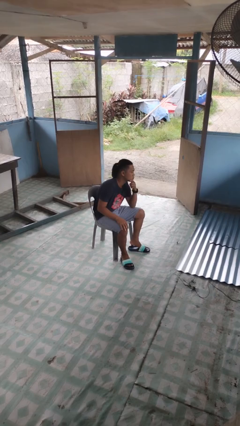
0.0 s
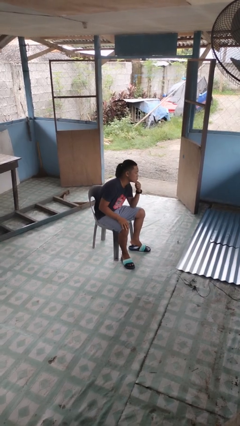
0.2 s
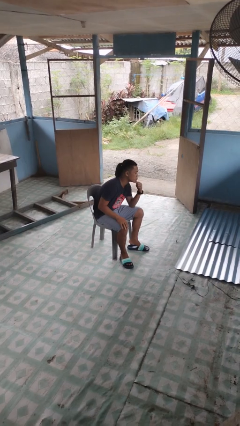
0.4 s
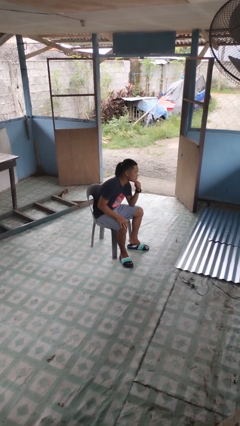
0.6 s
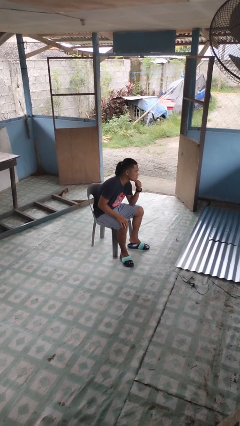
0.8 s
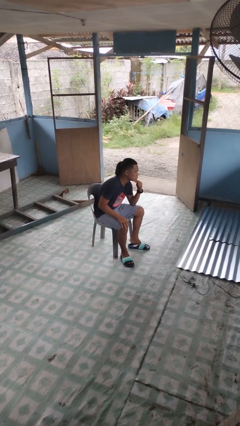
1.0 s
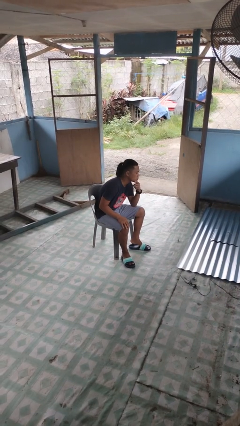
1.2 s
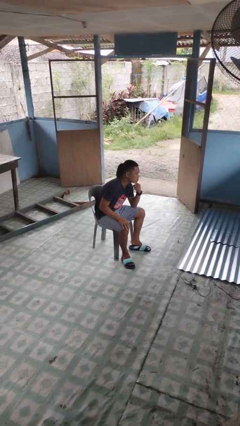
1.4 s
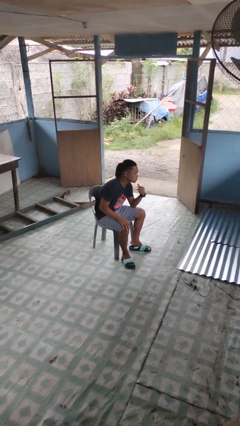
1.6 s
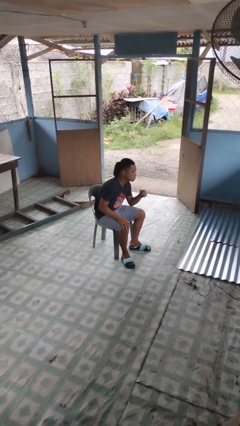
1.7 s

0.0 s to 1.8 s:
person strokes chin

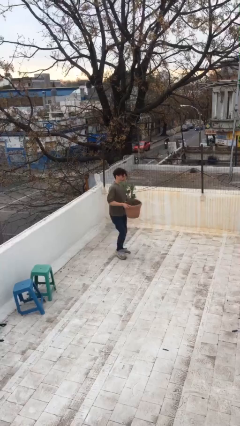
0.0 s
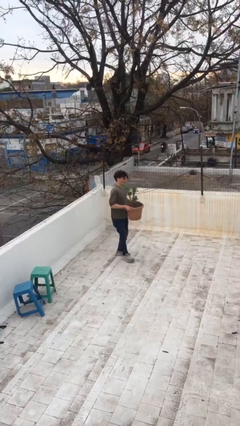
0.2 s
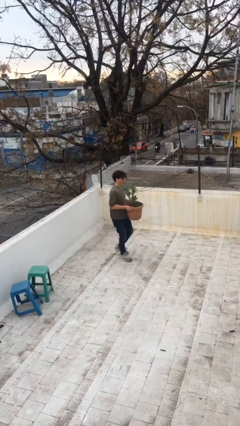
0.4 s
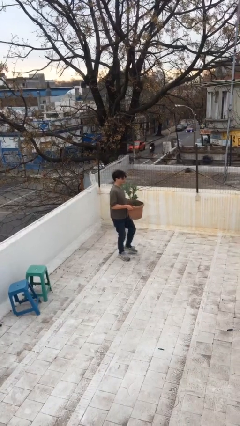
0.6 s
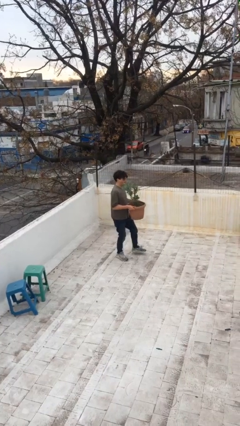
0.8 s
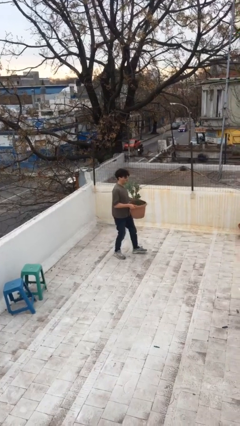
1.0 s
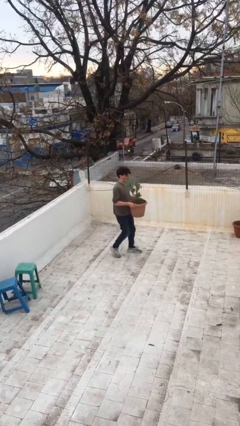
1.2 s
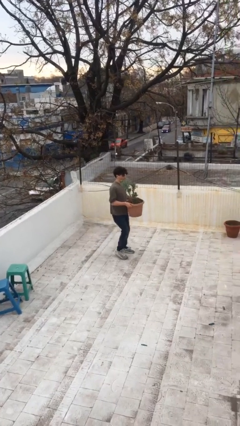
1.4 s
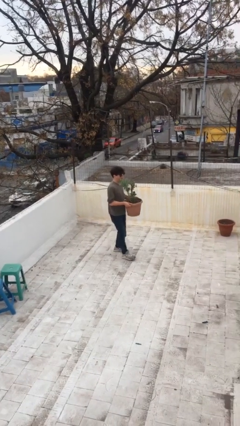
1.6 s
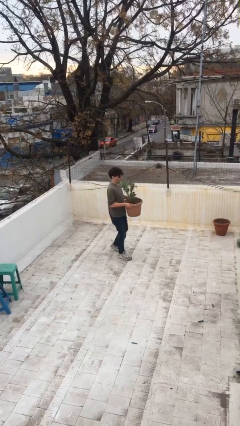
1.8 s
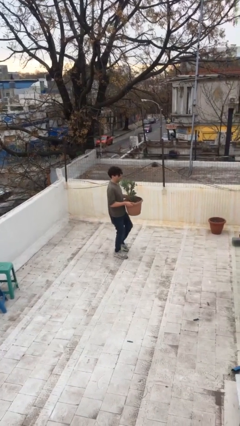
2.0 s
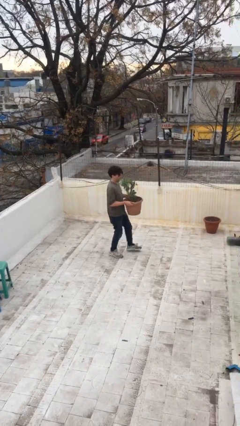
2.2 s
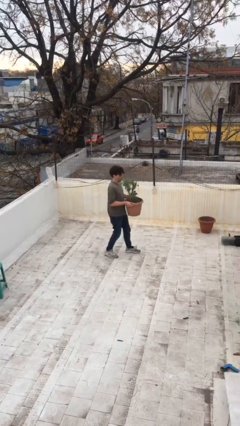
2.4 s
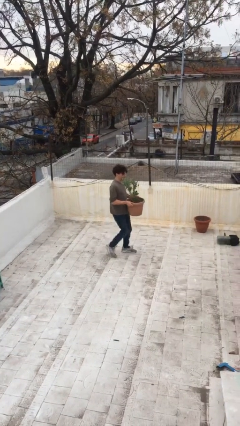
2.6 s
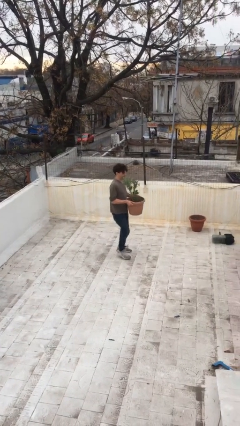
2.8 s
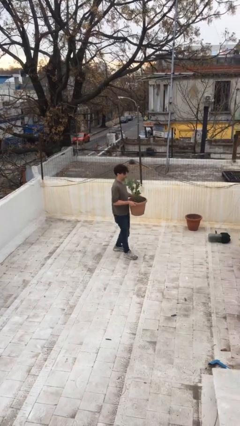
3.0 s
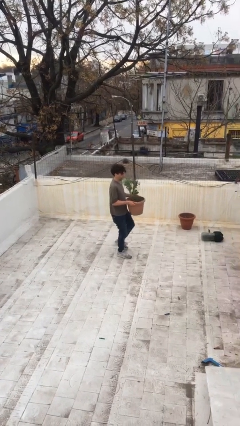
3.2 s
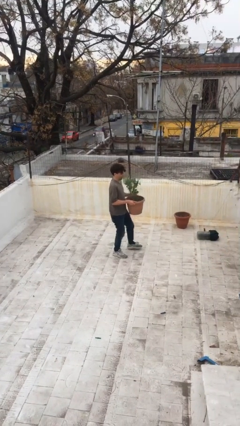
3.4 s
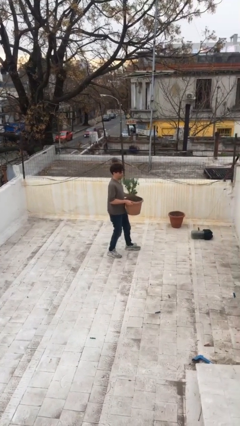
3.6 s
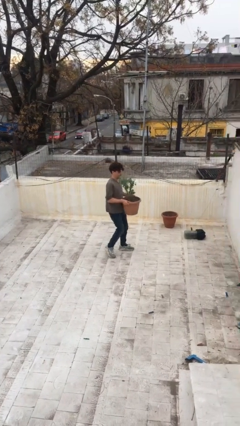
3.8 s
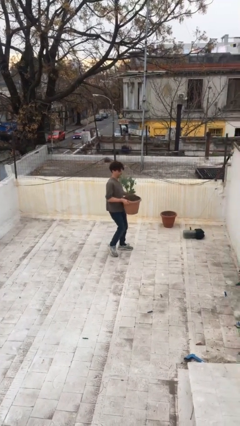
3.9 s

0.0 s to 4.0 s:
person carries heavy object

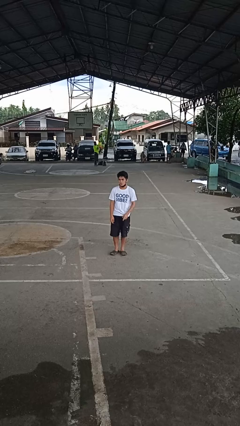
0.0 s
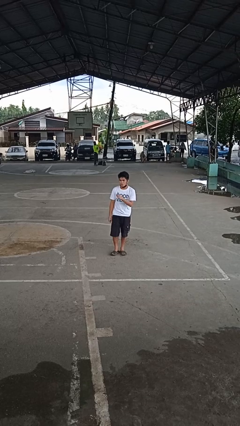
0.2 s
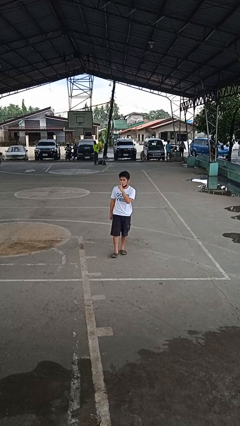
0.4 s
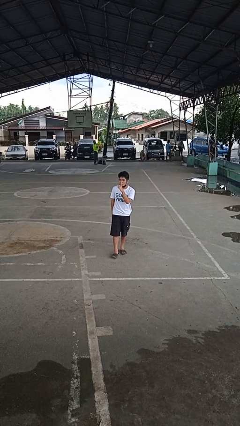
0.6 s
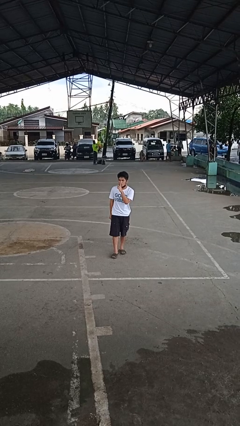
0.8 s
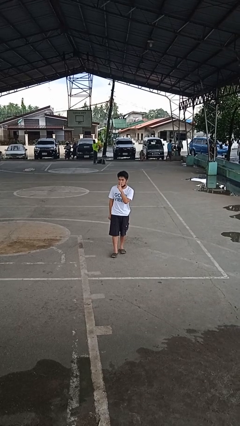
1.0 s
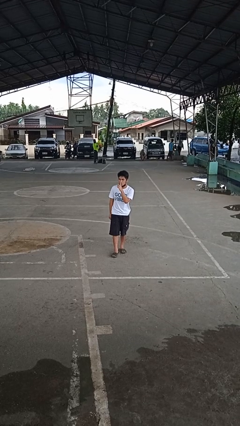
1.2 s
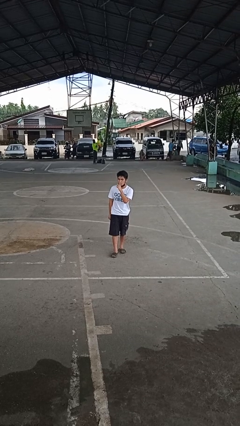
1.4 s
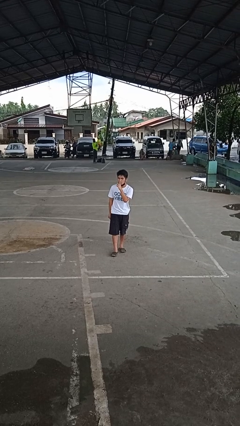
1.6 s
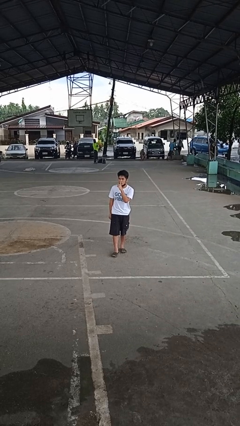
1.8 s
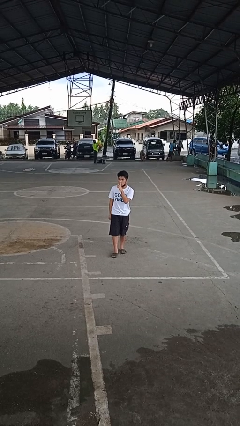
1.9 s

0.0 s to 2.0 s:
person gestures be quiet

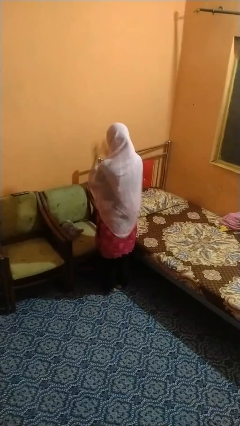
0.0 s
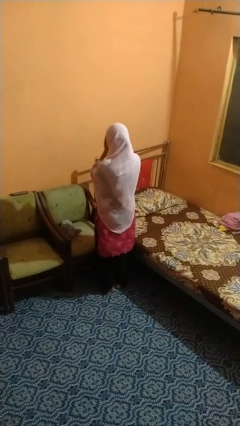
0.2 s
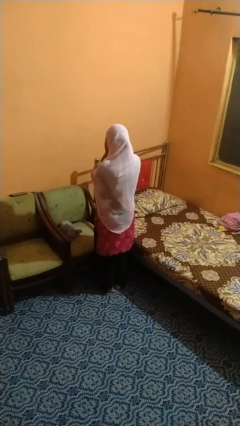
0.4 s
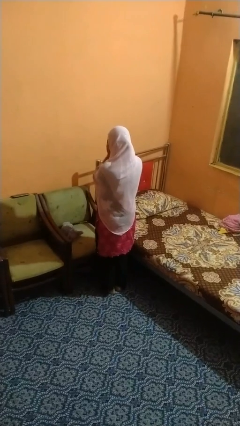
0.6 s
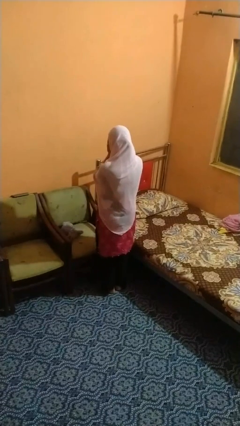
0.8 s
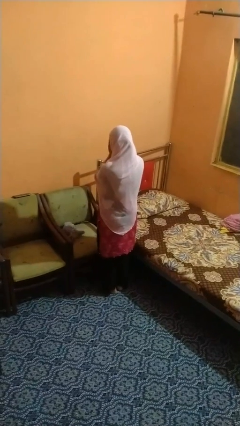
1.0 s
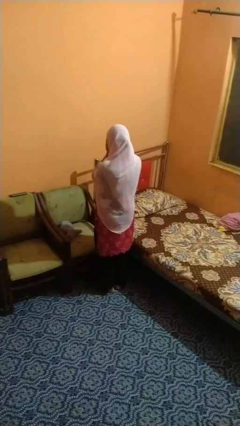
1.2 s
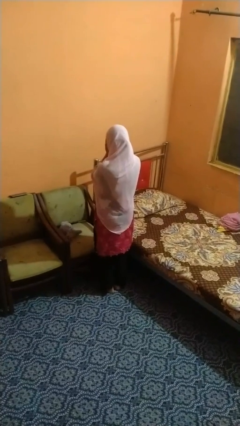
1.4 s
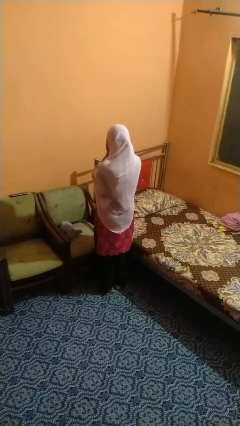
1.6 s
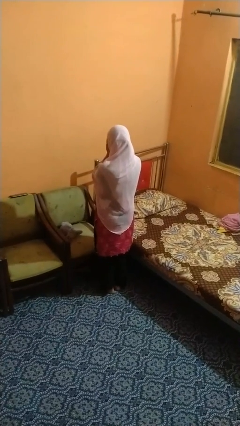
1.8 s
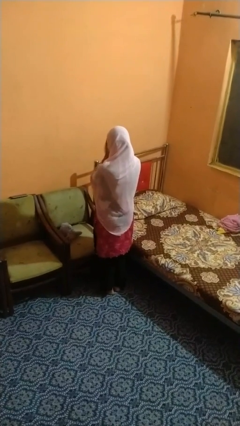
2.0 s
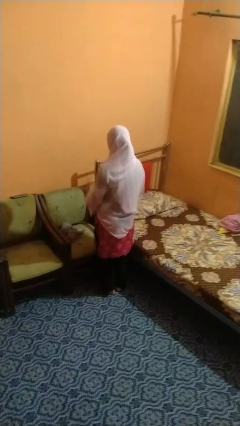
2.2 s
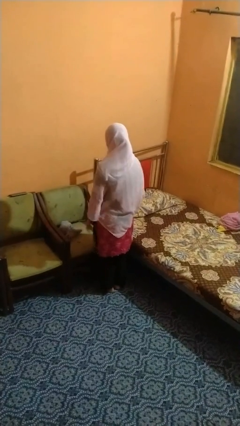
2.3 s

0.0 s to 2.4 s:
person covers face with hands

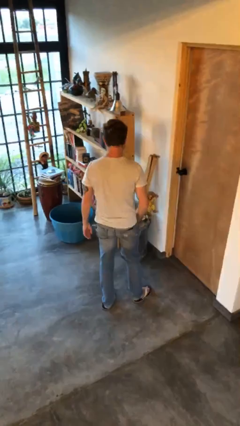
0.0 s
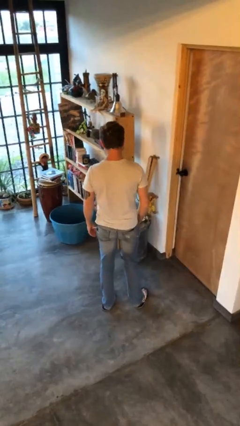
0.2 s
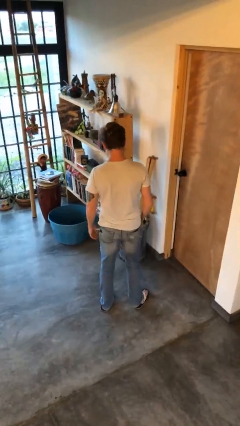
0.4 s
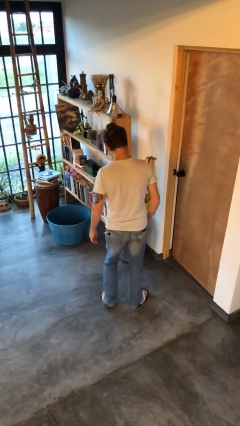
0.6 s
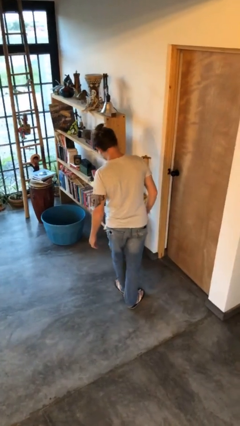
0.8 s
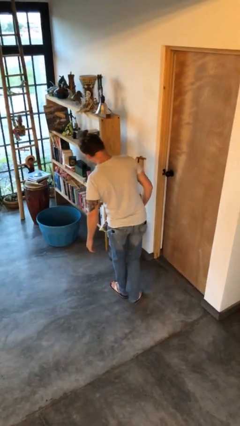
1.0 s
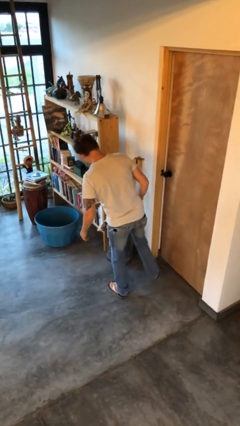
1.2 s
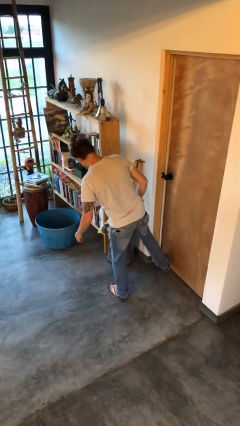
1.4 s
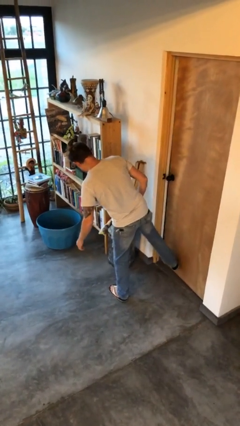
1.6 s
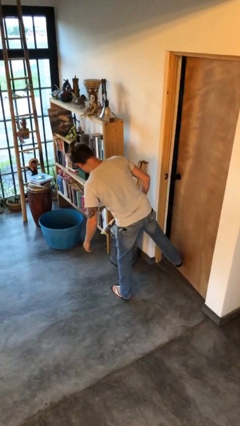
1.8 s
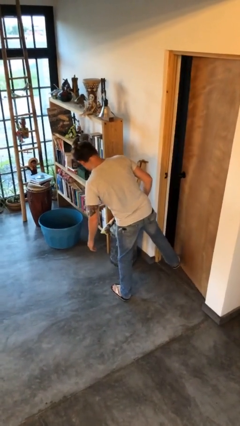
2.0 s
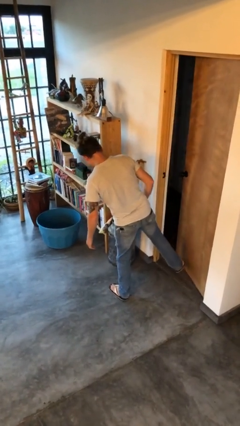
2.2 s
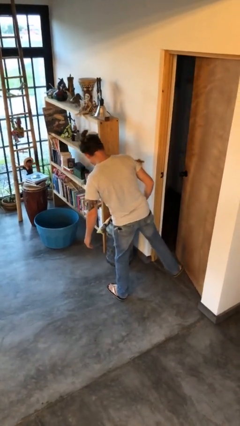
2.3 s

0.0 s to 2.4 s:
person opens facility door

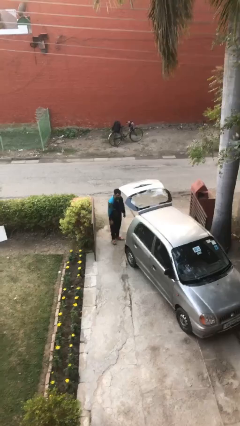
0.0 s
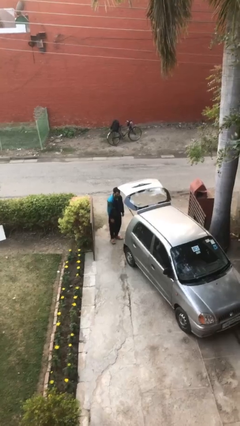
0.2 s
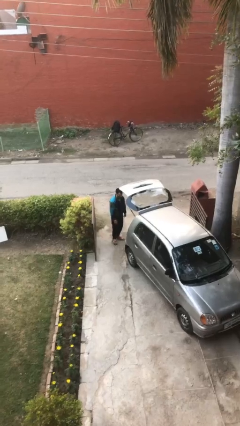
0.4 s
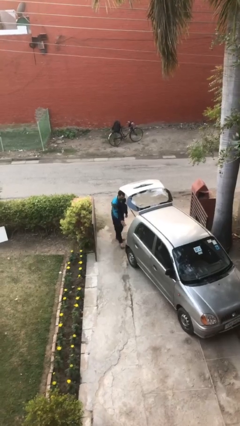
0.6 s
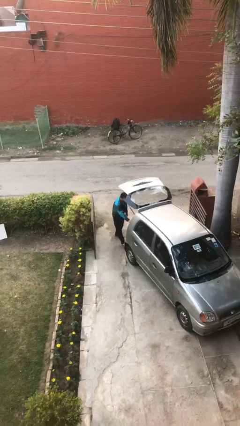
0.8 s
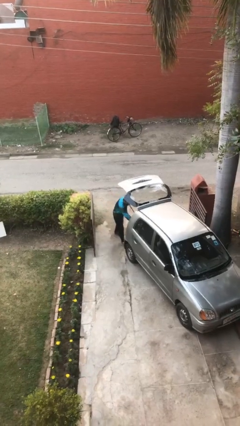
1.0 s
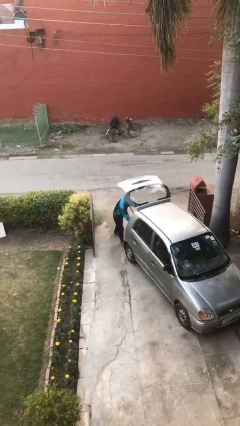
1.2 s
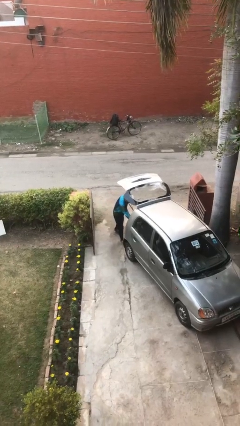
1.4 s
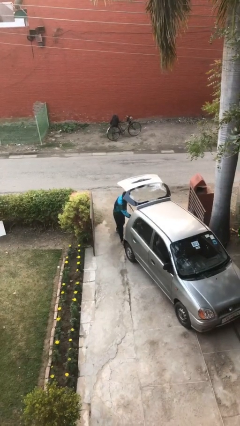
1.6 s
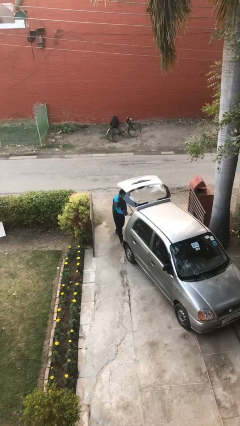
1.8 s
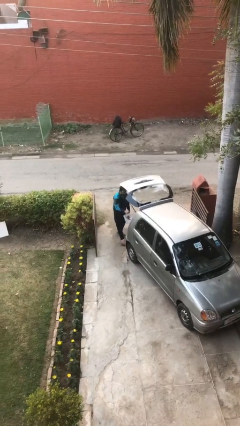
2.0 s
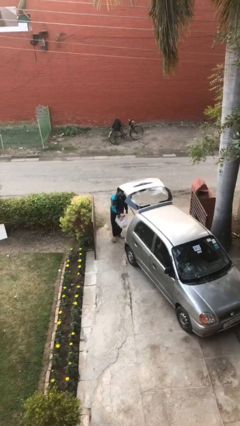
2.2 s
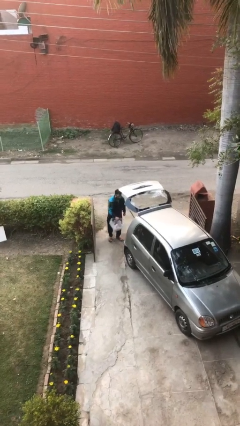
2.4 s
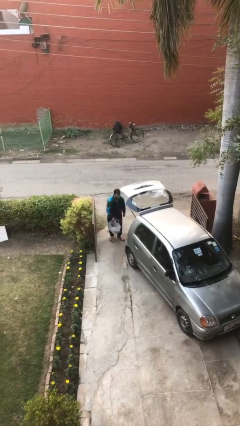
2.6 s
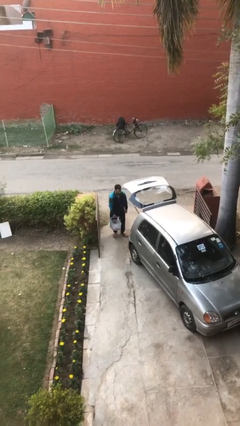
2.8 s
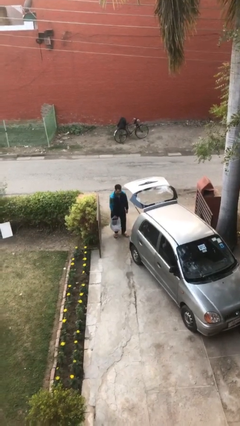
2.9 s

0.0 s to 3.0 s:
person unloads car

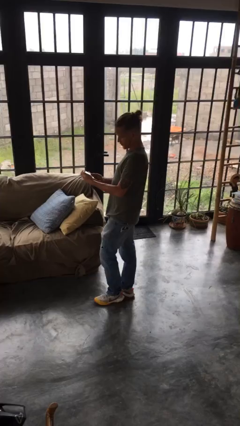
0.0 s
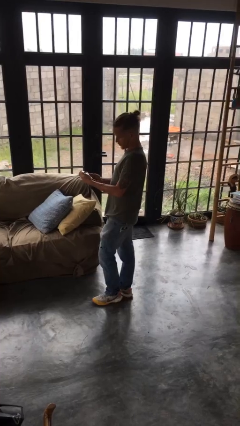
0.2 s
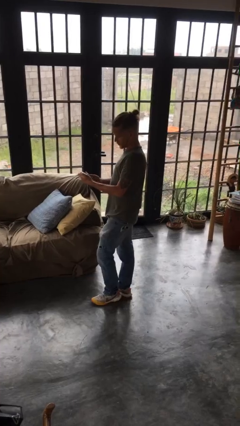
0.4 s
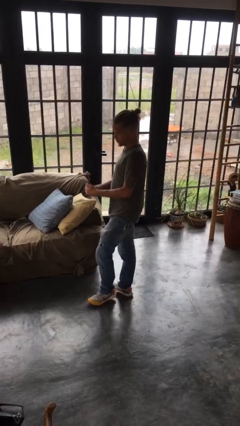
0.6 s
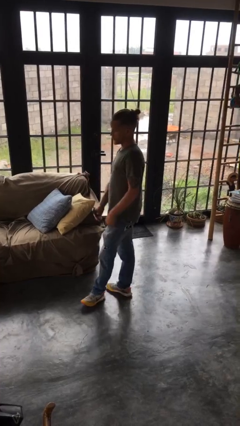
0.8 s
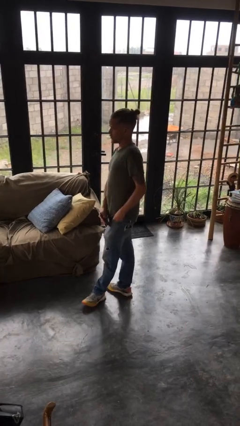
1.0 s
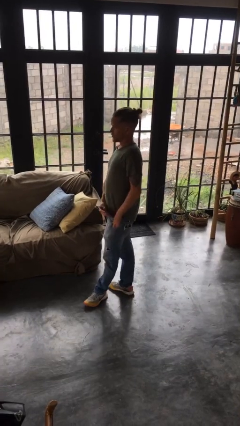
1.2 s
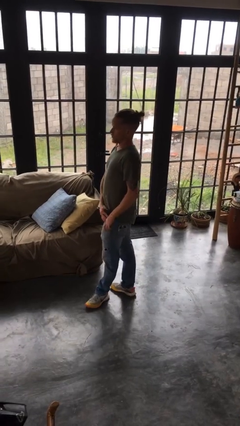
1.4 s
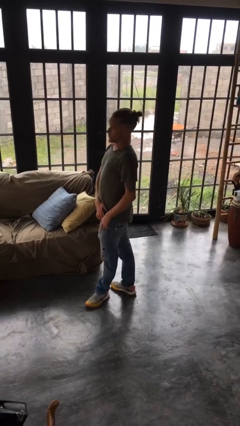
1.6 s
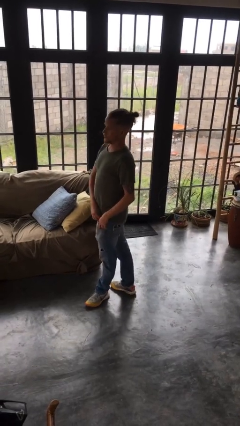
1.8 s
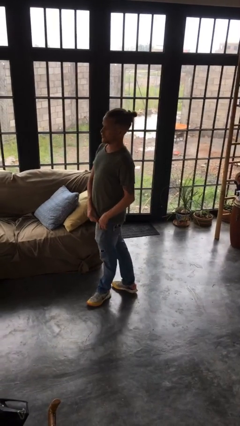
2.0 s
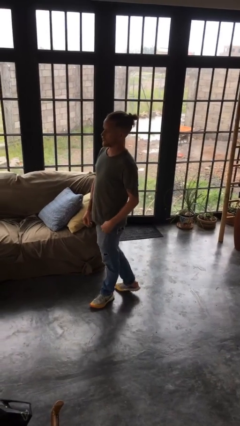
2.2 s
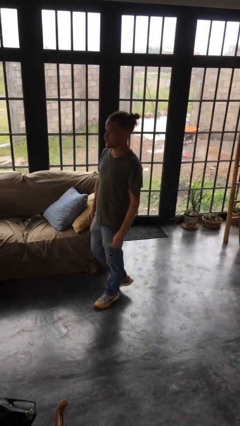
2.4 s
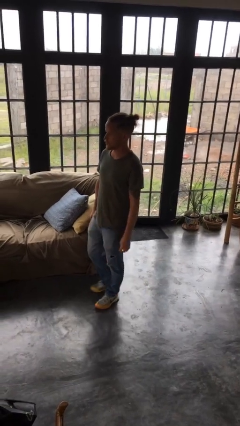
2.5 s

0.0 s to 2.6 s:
person puts phone into pocket
